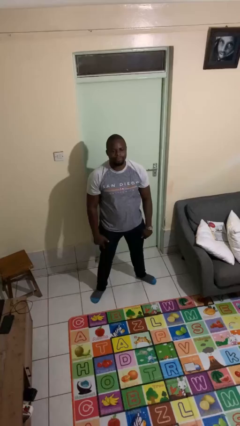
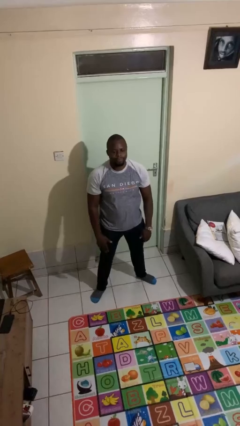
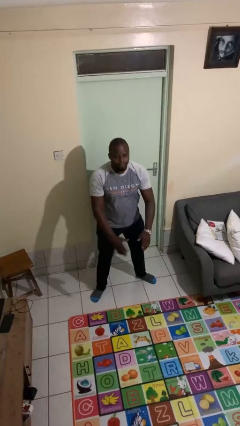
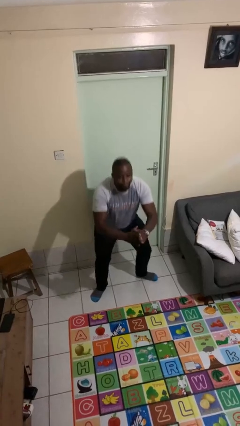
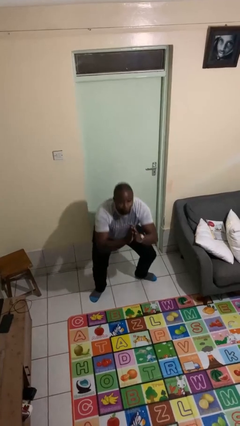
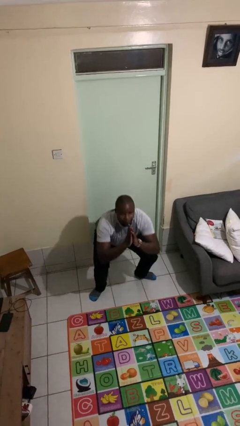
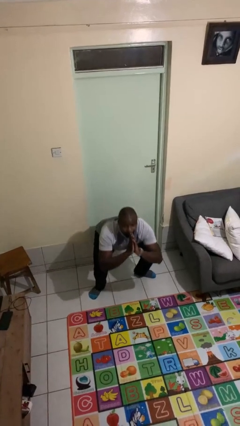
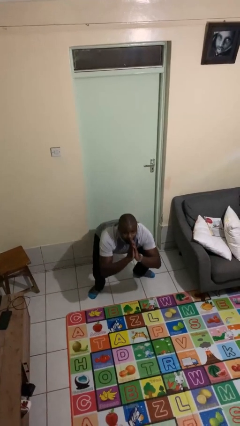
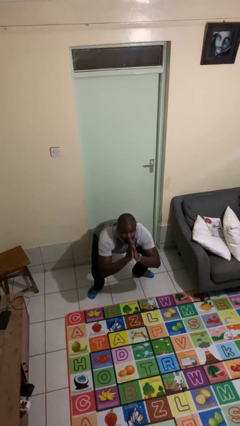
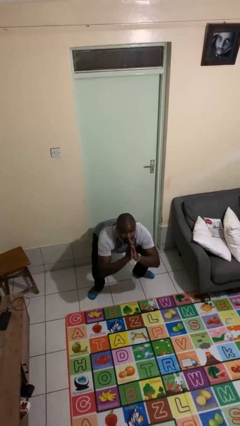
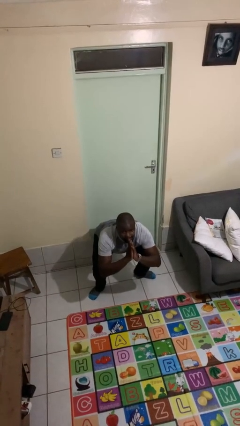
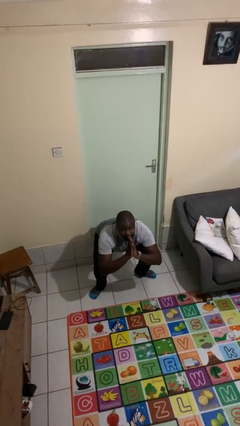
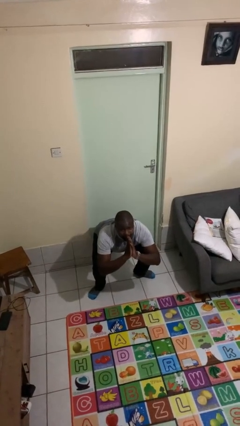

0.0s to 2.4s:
person squats

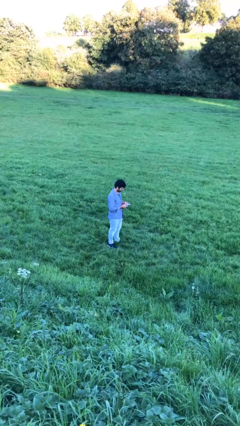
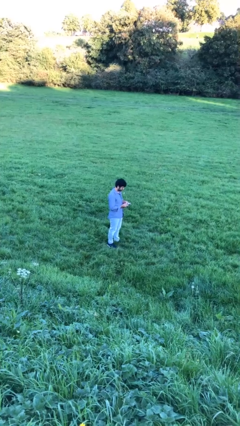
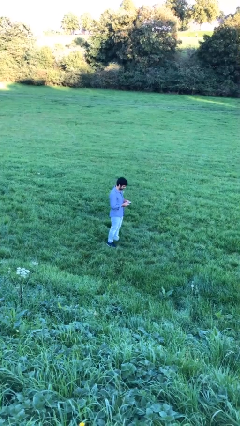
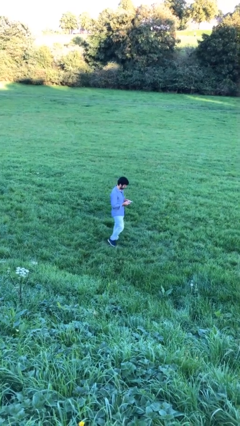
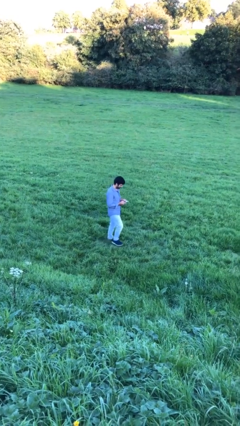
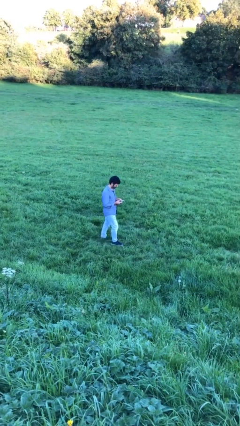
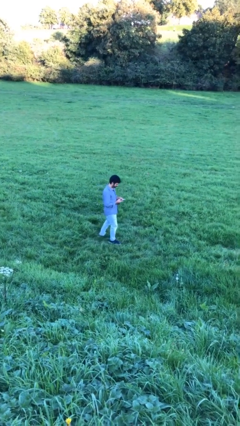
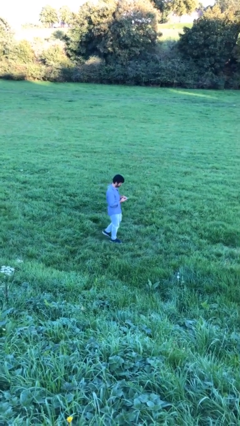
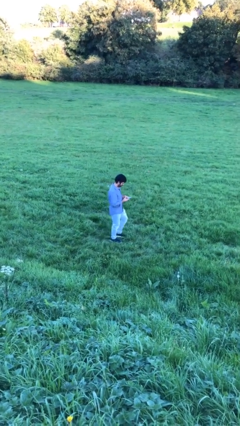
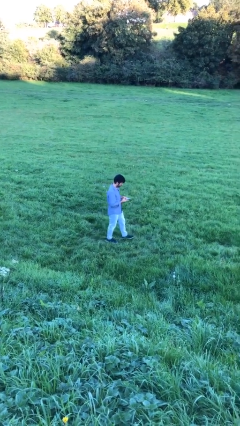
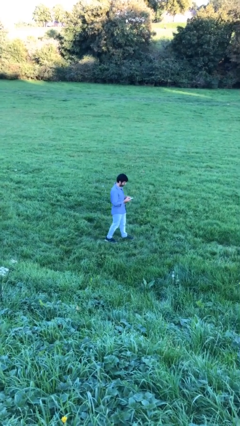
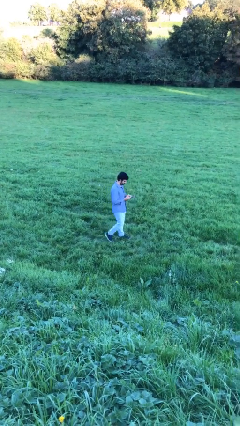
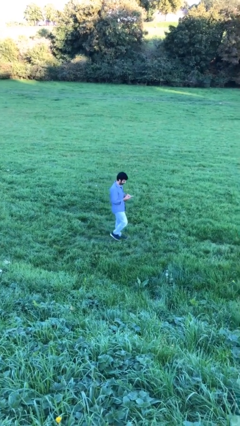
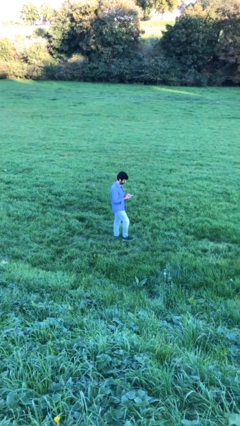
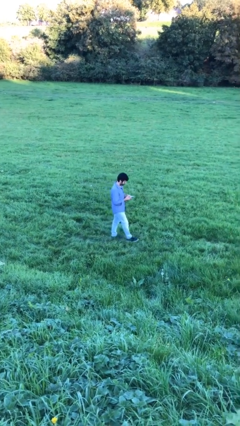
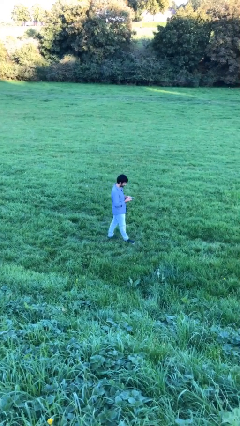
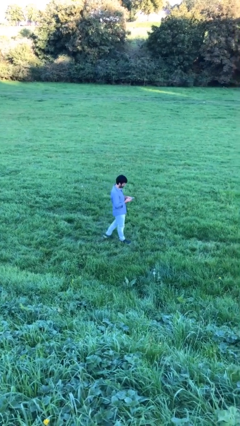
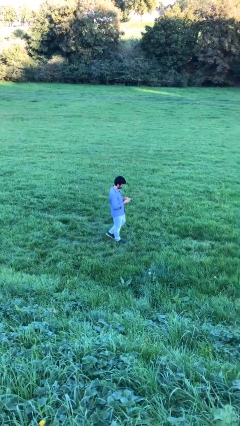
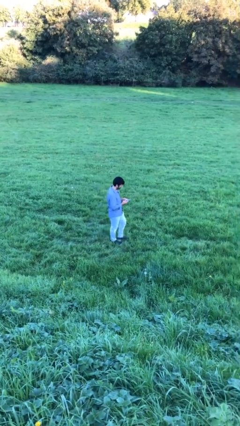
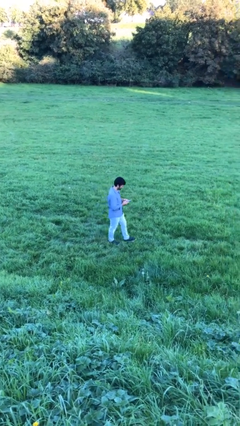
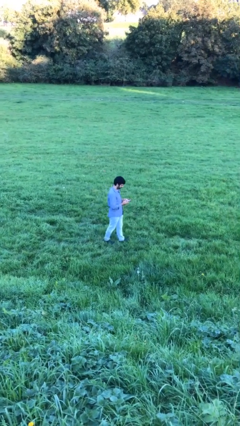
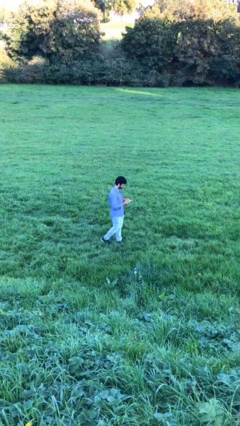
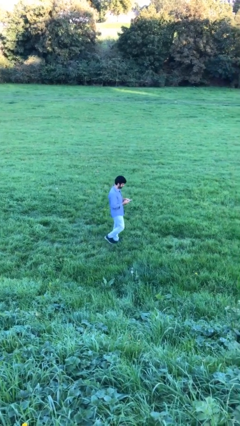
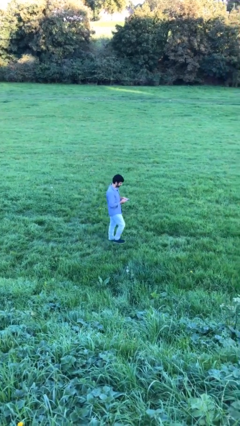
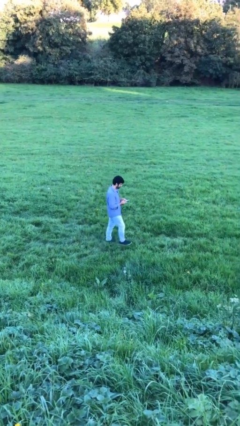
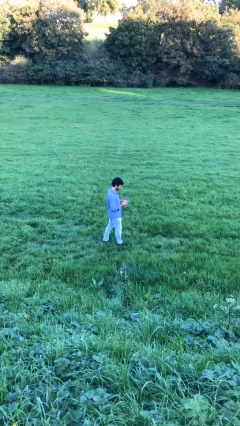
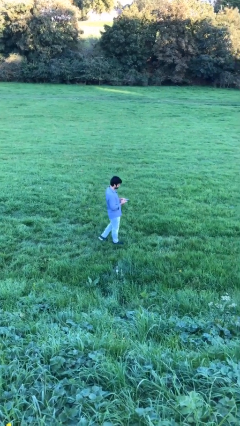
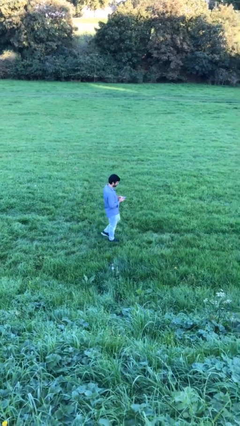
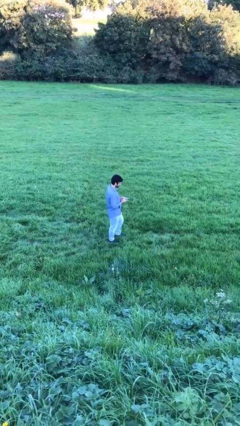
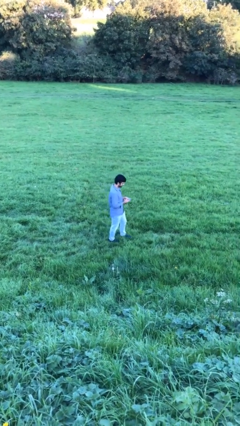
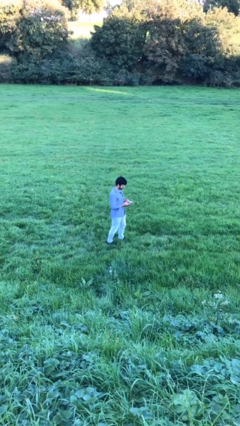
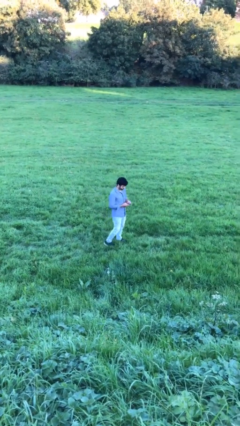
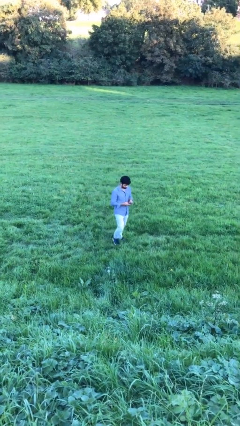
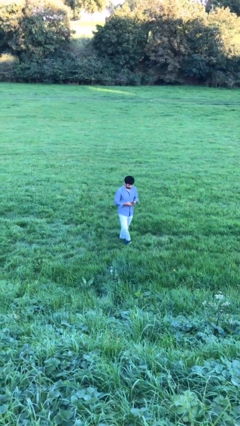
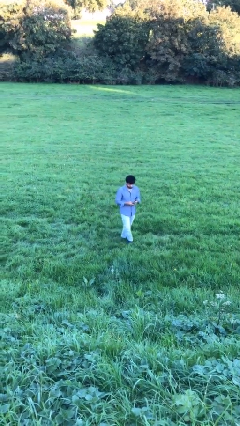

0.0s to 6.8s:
person texts on phone

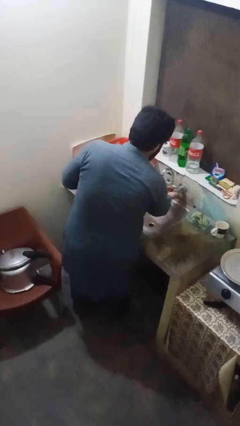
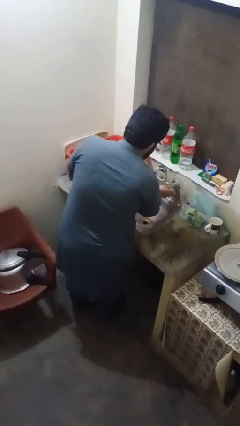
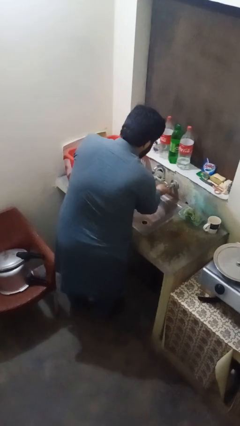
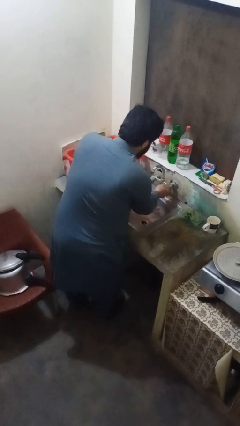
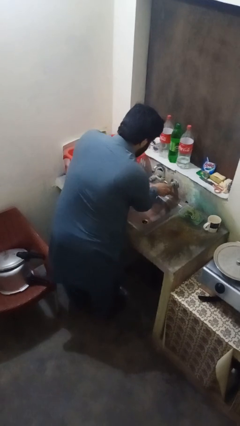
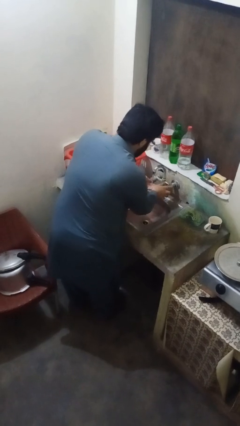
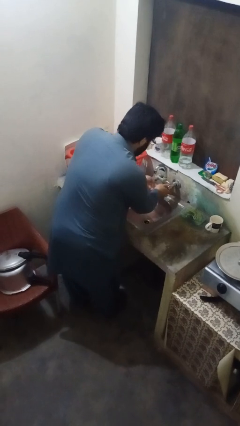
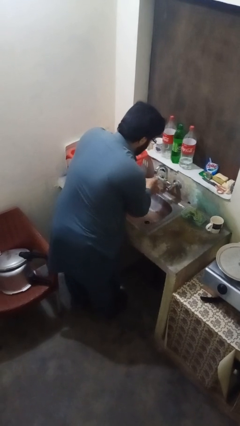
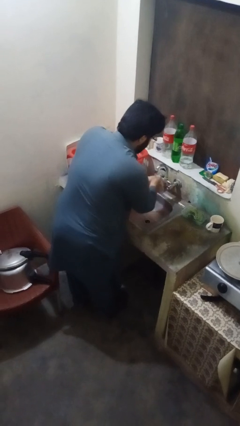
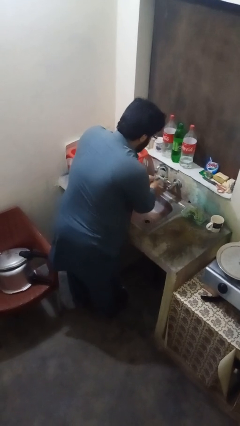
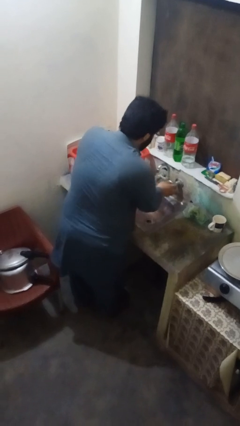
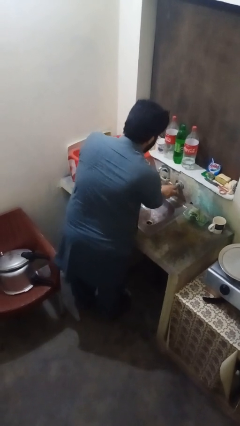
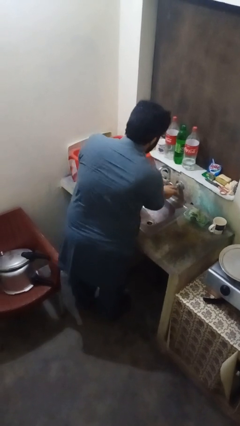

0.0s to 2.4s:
person washes hands

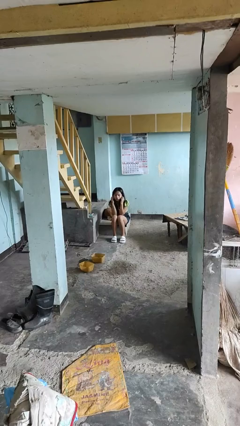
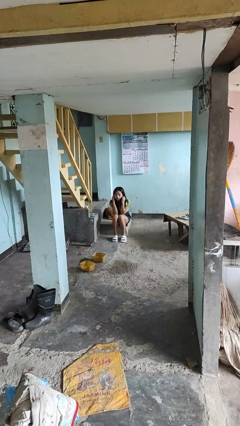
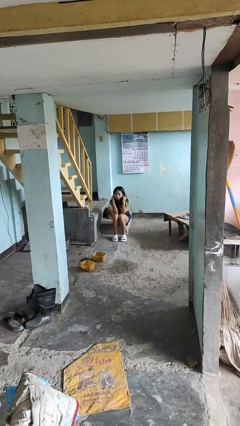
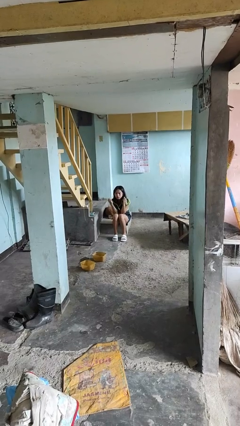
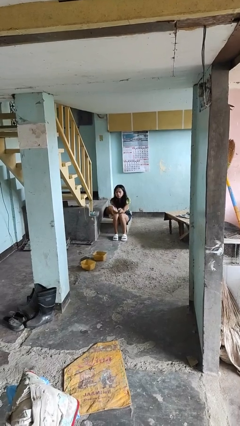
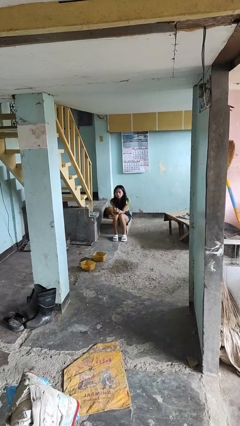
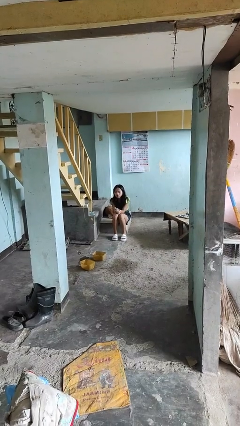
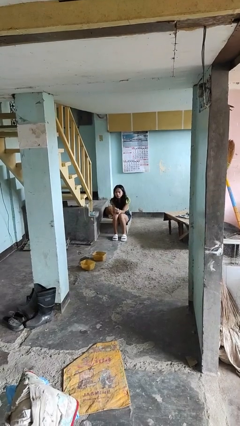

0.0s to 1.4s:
person takes off headphones

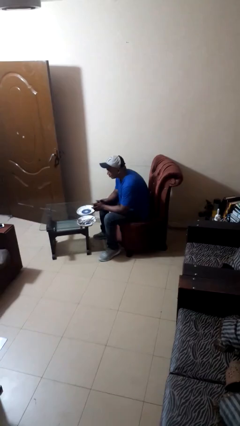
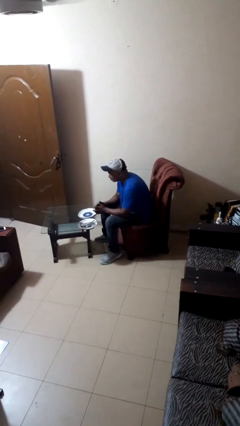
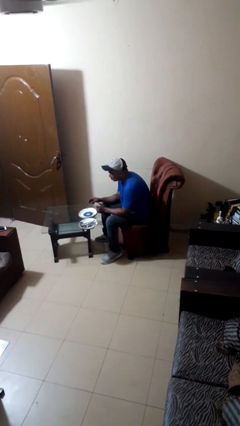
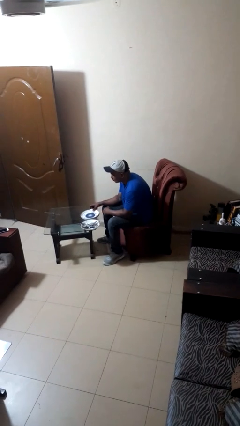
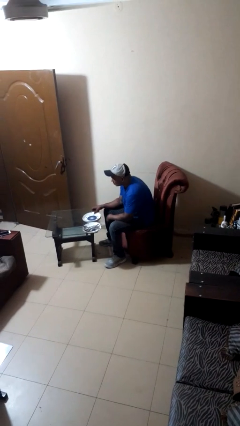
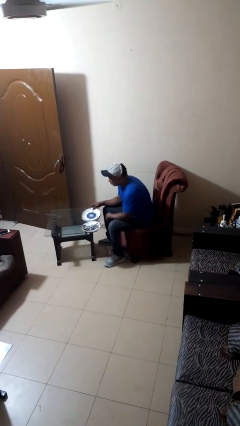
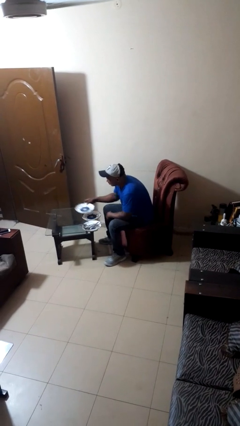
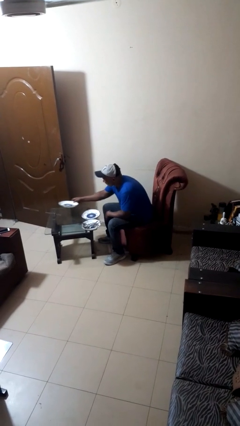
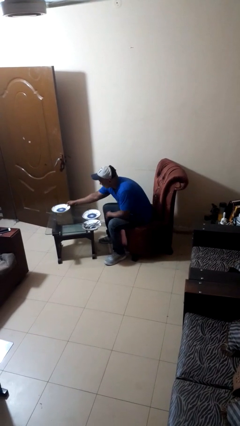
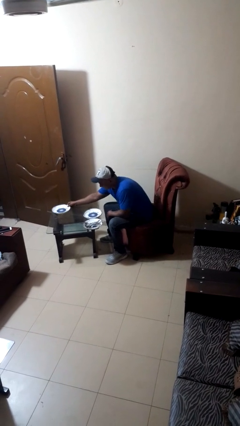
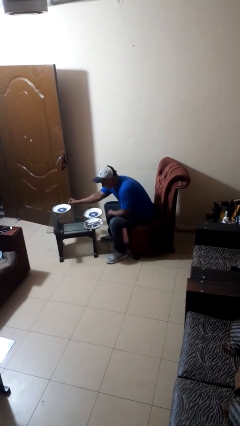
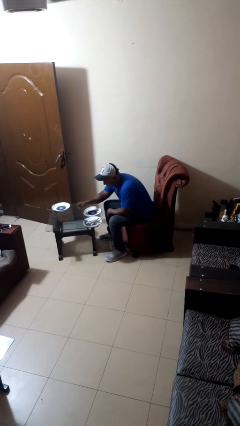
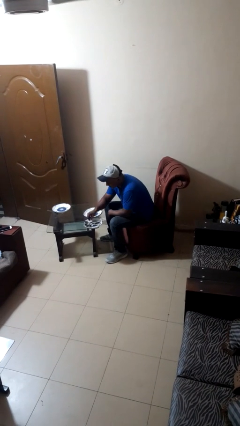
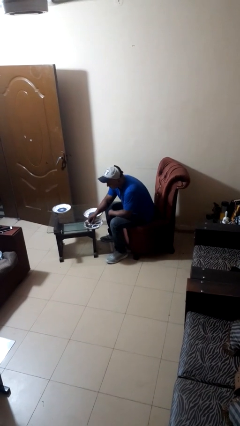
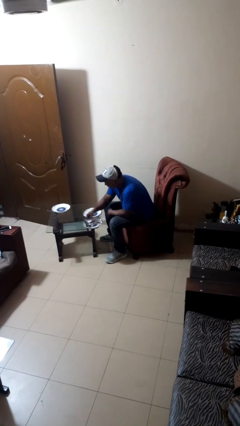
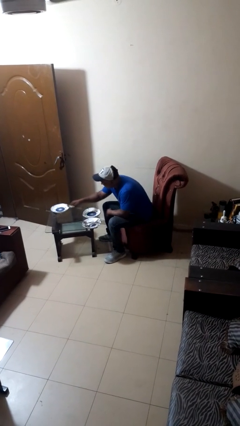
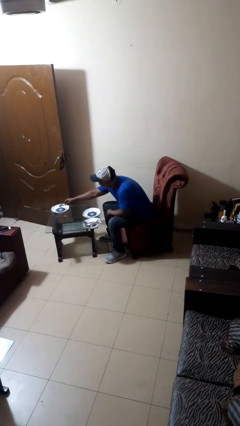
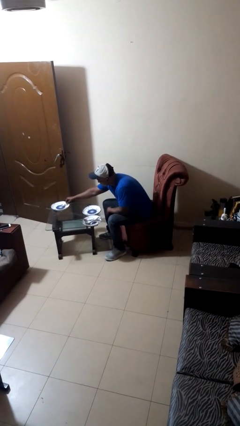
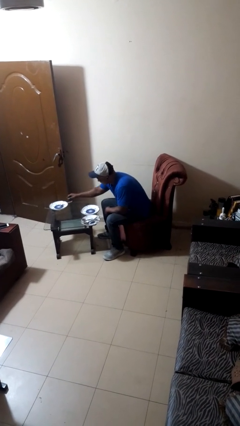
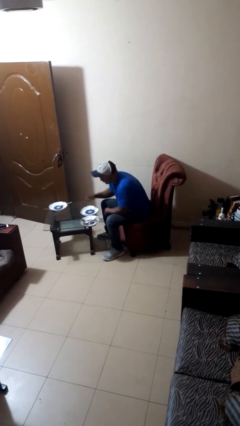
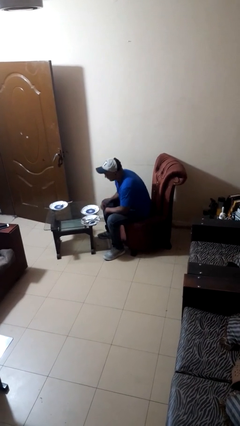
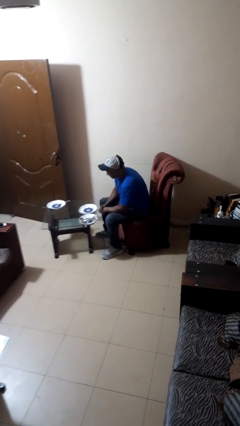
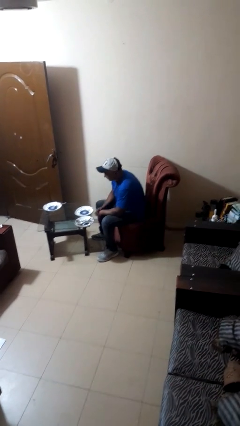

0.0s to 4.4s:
person sets table
